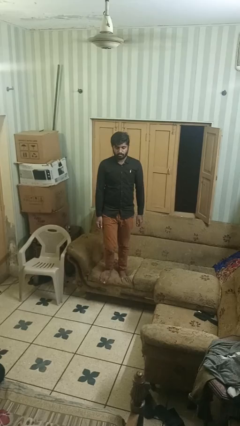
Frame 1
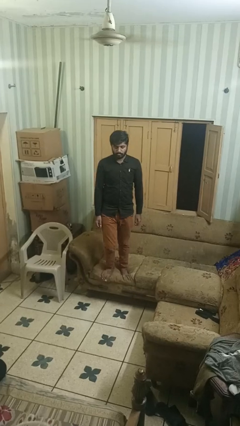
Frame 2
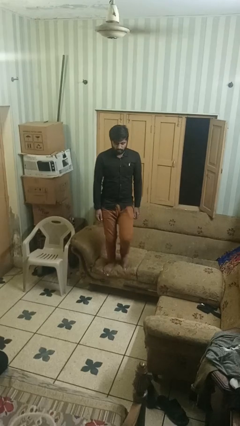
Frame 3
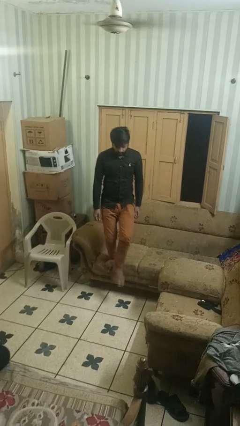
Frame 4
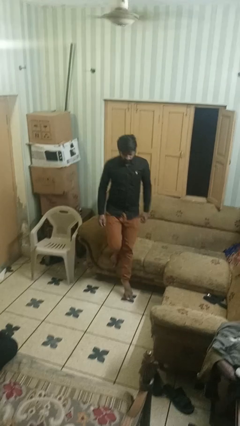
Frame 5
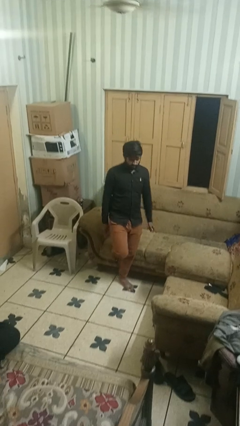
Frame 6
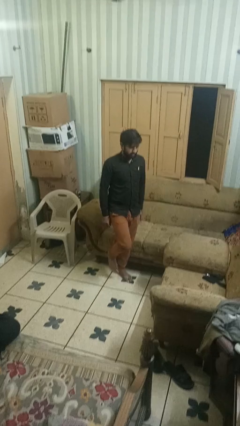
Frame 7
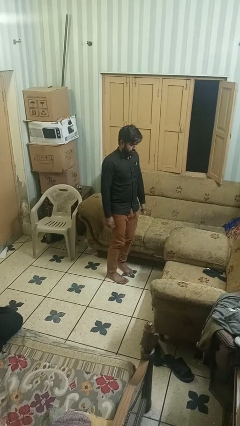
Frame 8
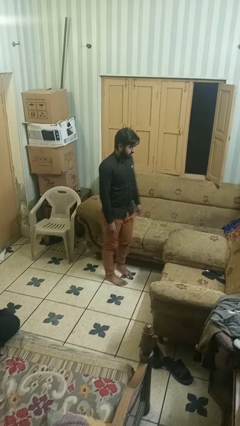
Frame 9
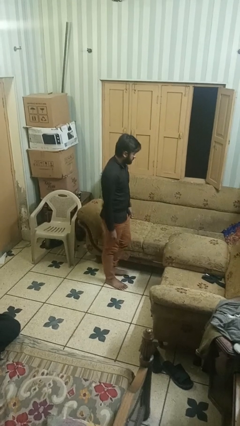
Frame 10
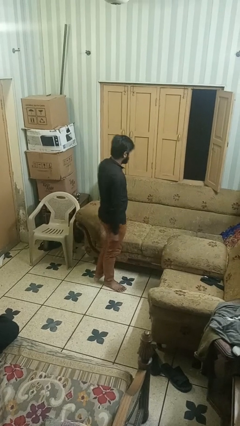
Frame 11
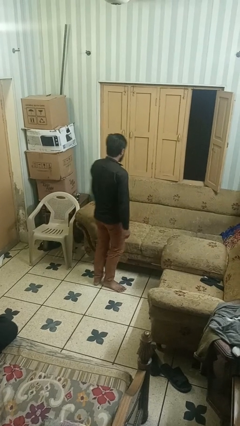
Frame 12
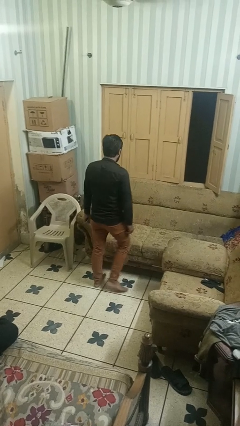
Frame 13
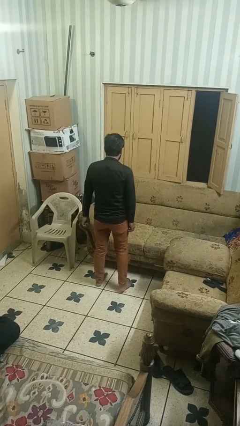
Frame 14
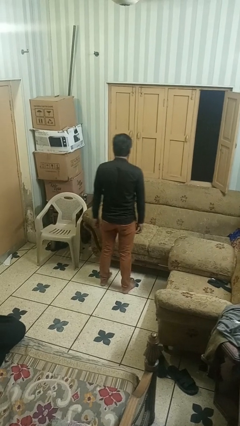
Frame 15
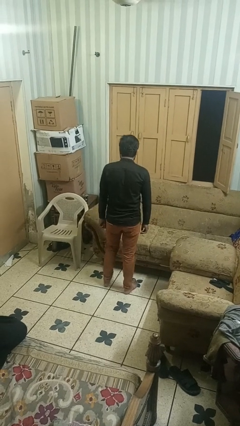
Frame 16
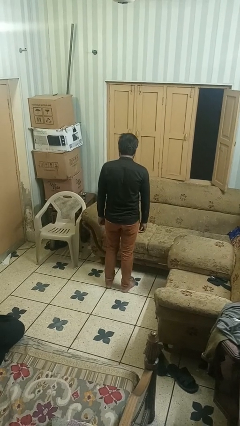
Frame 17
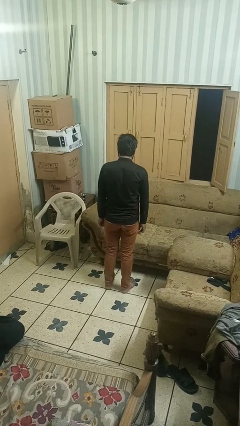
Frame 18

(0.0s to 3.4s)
person climbs off couch

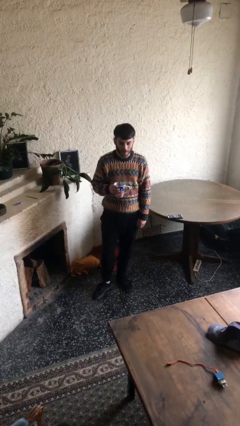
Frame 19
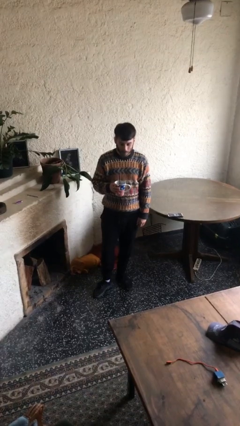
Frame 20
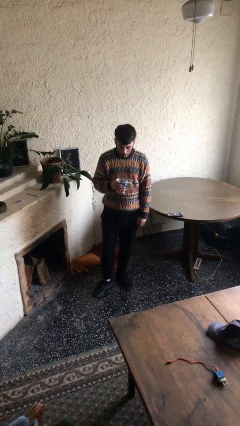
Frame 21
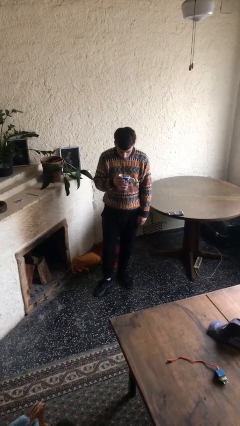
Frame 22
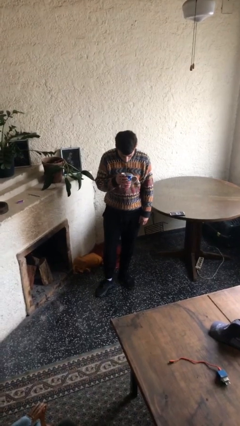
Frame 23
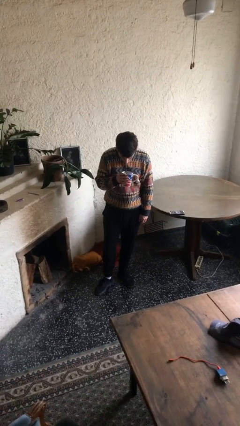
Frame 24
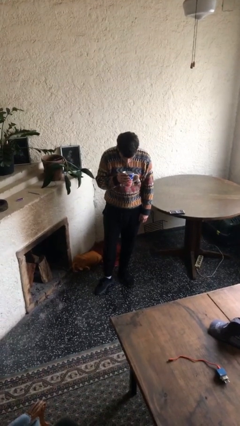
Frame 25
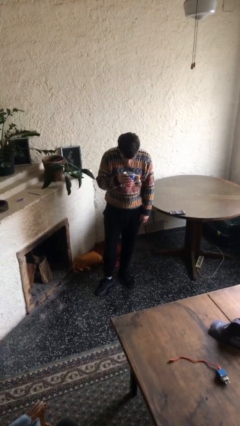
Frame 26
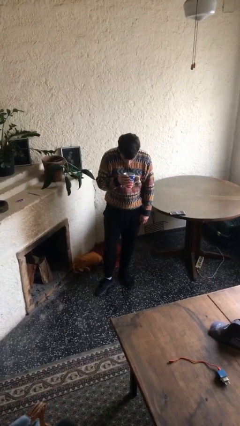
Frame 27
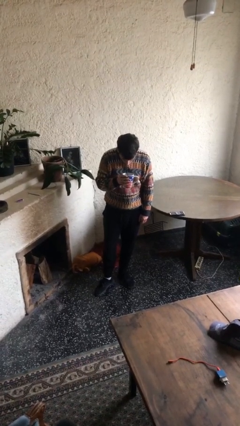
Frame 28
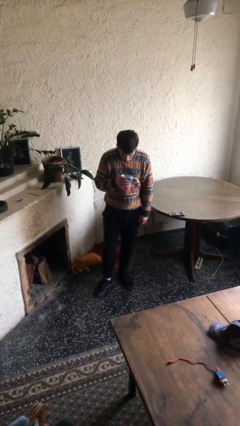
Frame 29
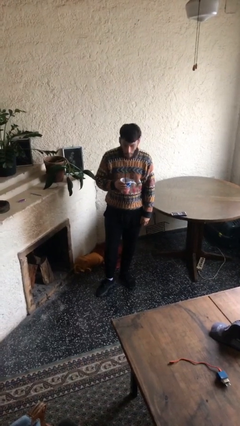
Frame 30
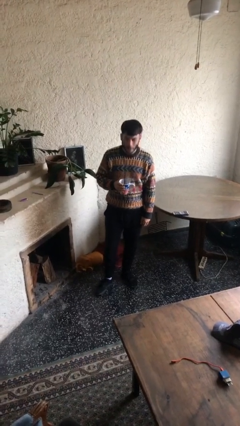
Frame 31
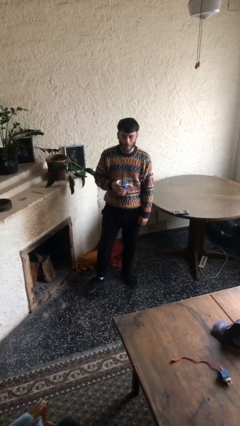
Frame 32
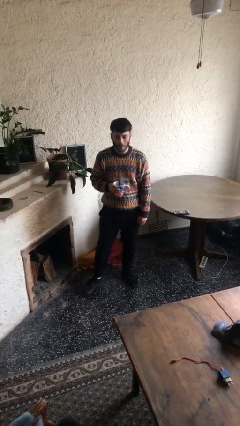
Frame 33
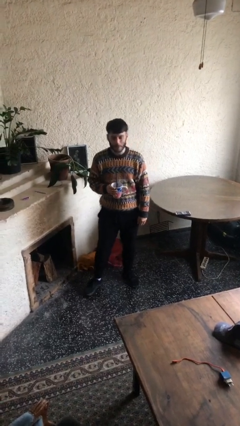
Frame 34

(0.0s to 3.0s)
person drinks from straw

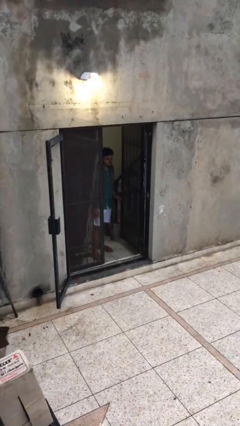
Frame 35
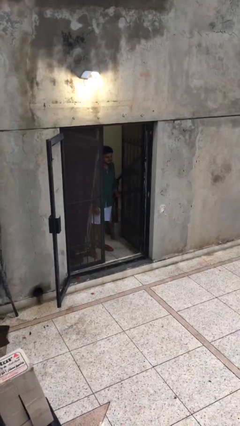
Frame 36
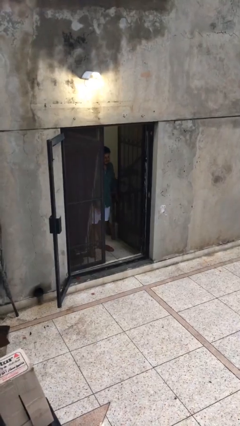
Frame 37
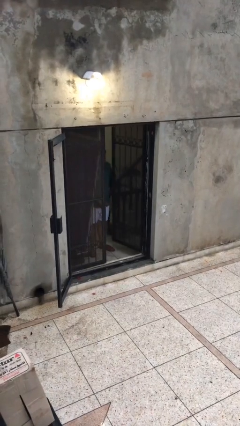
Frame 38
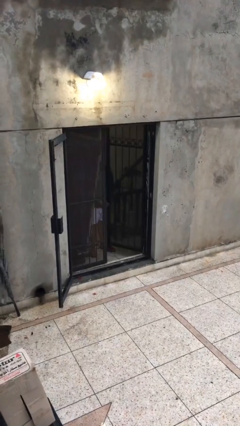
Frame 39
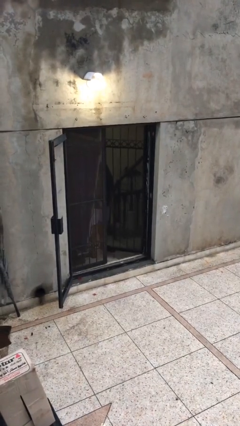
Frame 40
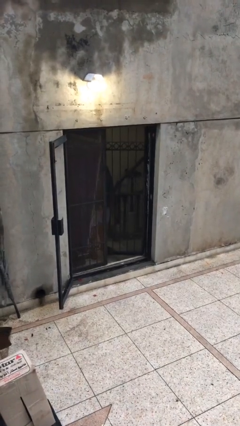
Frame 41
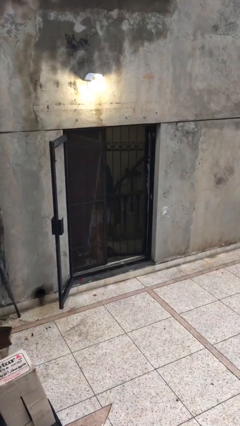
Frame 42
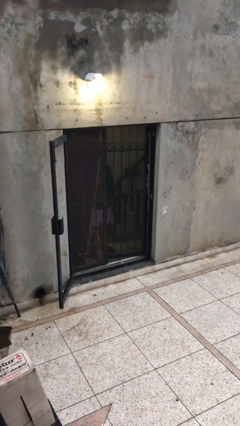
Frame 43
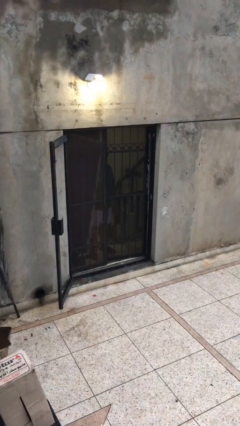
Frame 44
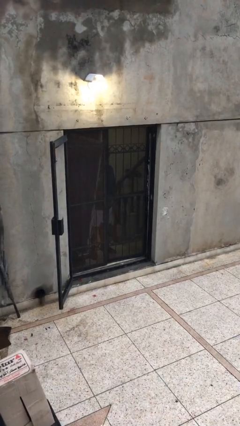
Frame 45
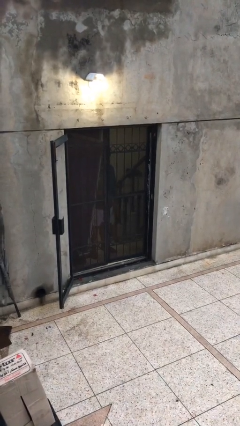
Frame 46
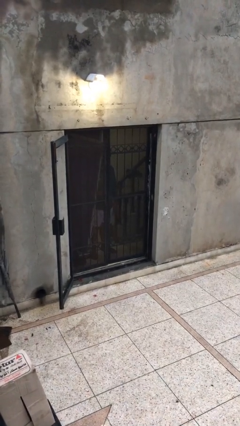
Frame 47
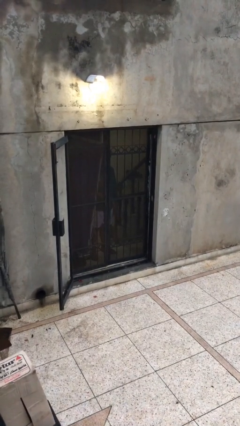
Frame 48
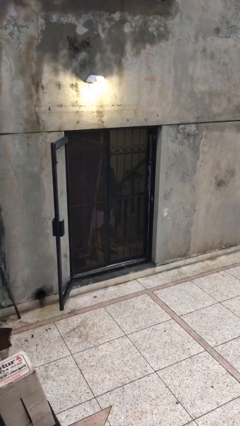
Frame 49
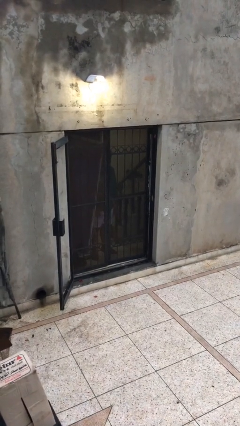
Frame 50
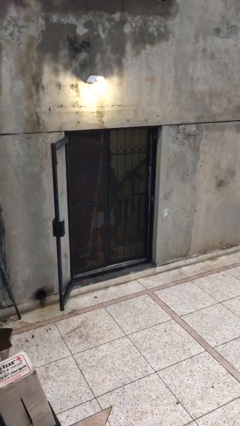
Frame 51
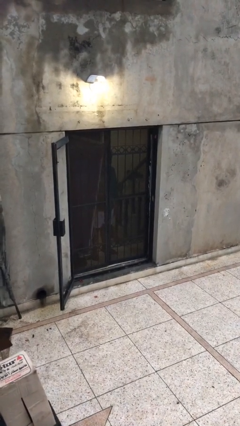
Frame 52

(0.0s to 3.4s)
person closes facility door

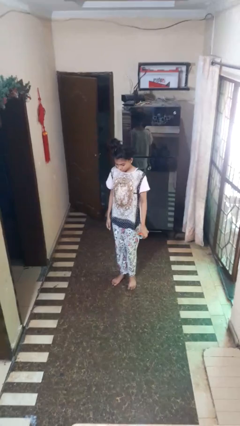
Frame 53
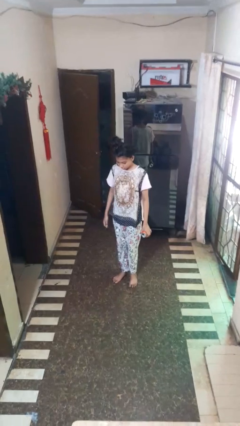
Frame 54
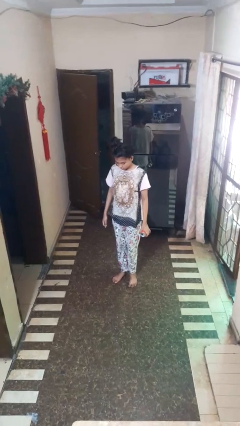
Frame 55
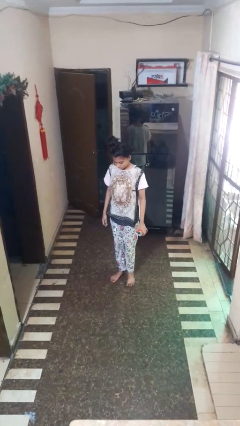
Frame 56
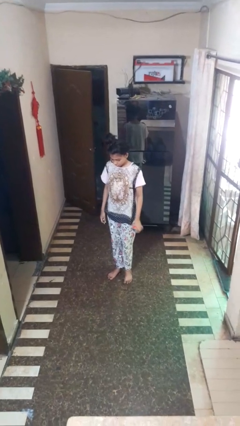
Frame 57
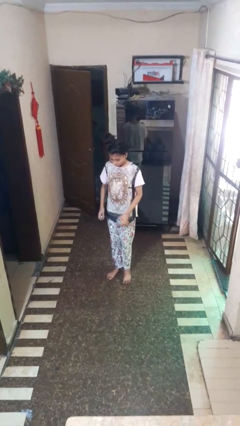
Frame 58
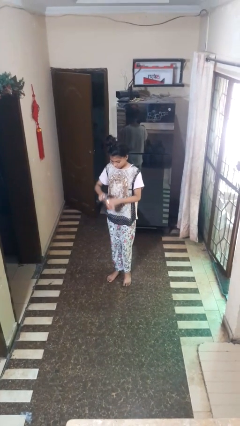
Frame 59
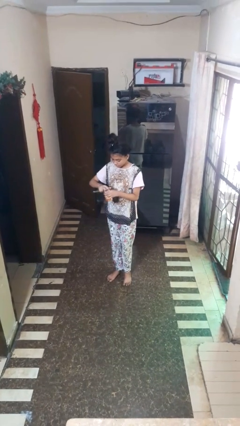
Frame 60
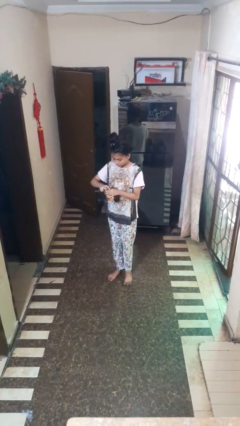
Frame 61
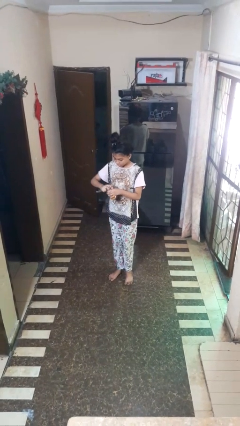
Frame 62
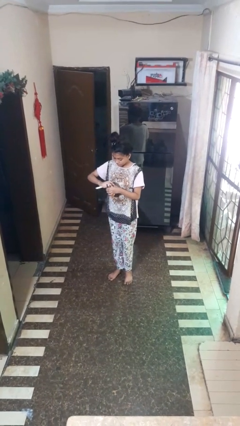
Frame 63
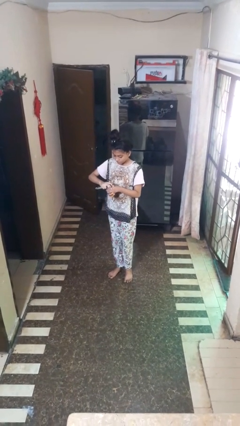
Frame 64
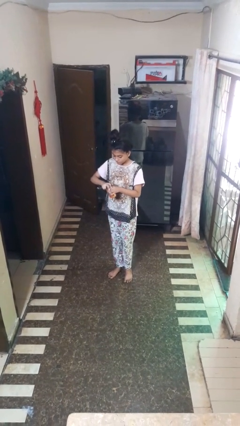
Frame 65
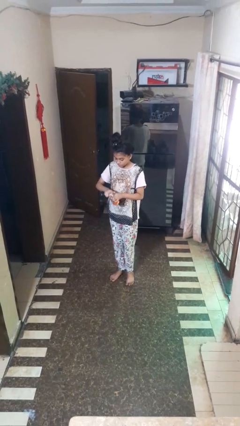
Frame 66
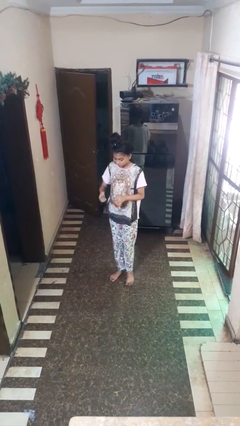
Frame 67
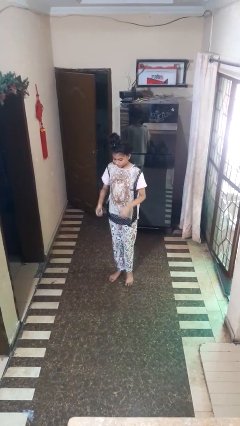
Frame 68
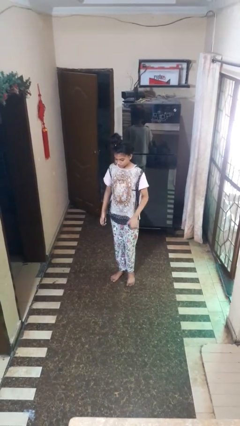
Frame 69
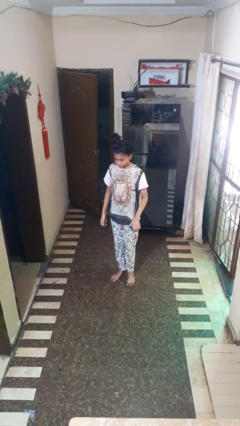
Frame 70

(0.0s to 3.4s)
person opens can with can opener

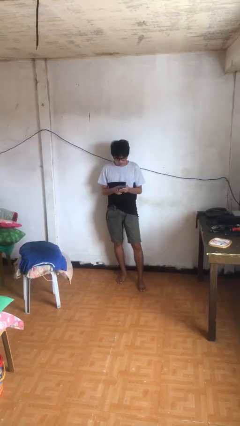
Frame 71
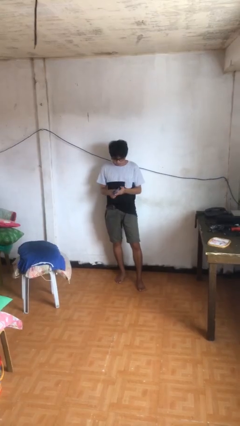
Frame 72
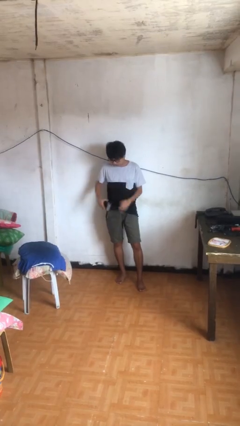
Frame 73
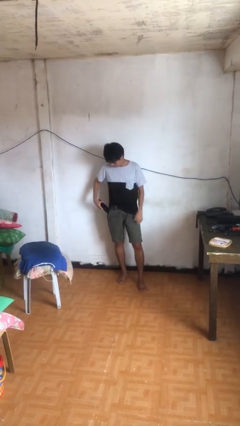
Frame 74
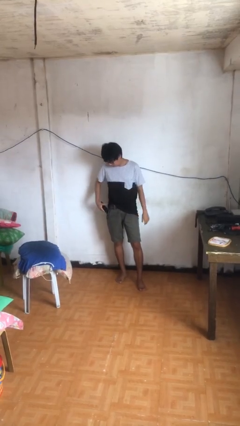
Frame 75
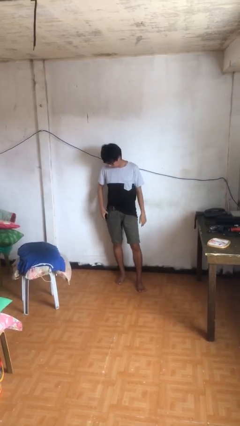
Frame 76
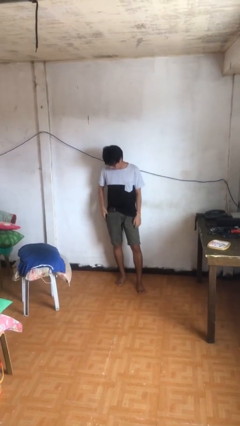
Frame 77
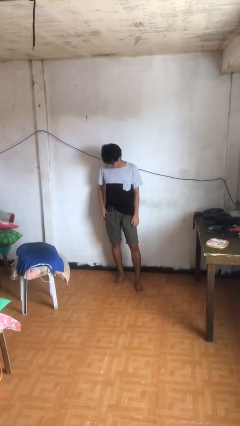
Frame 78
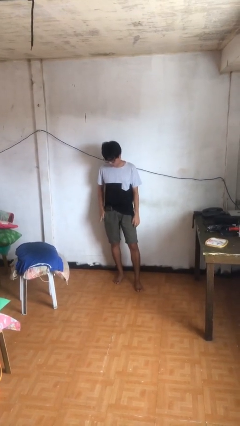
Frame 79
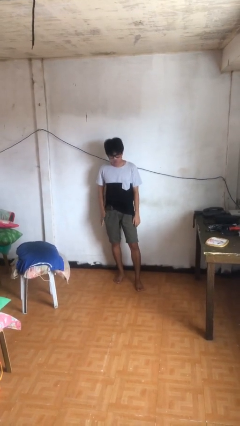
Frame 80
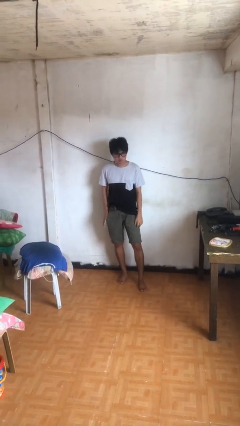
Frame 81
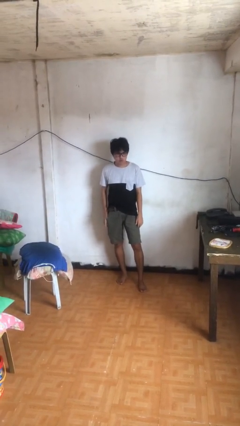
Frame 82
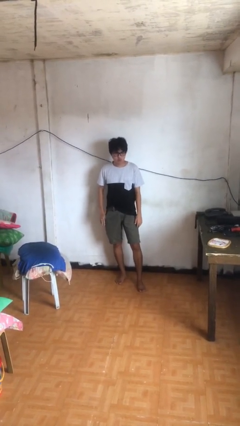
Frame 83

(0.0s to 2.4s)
person puts phone into pocket

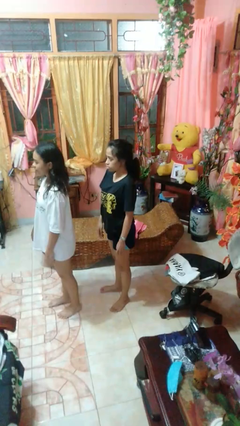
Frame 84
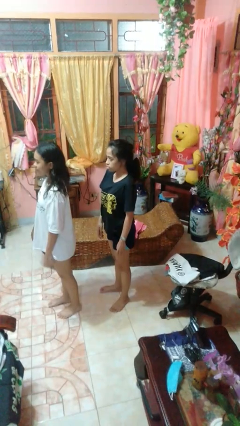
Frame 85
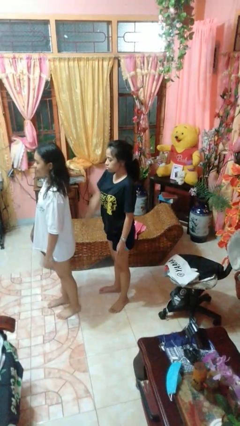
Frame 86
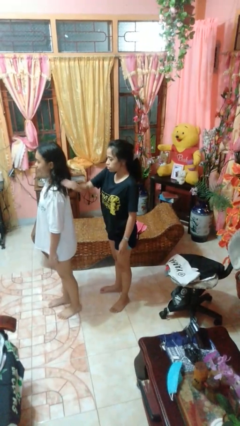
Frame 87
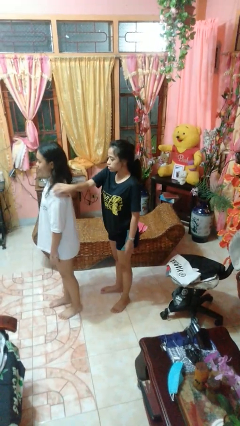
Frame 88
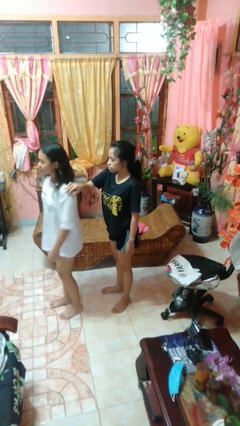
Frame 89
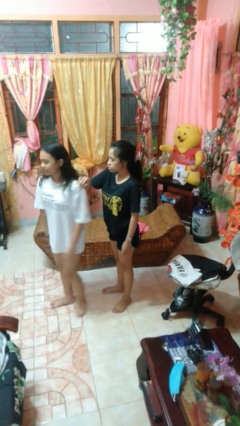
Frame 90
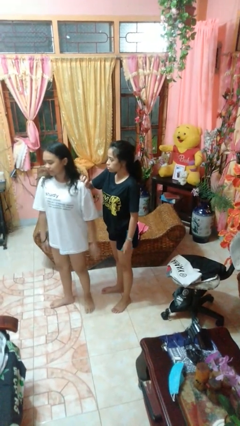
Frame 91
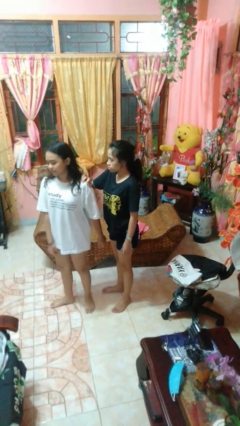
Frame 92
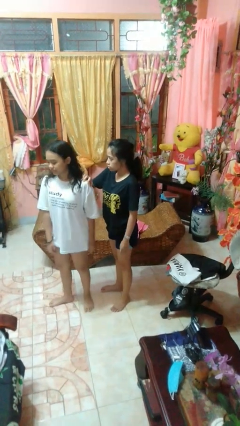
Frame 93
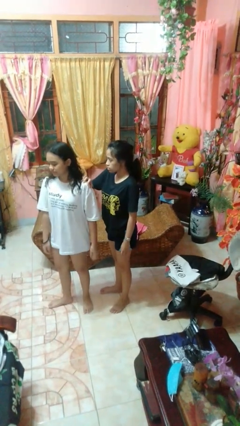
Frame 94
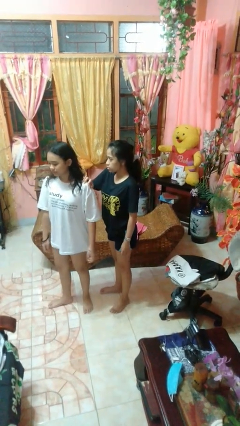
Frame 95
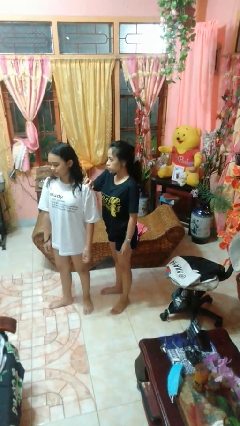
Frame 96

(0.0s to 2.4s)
person grabs person by shoulder
